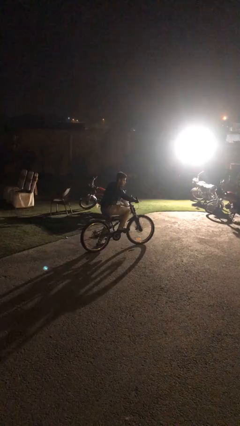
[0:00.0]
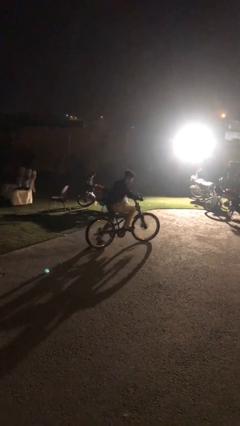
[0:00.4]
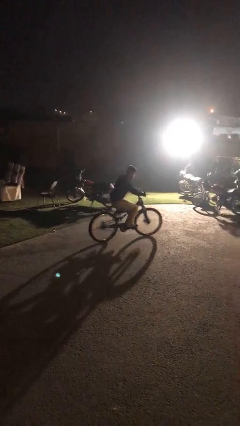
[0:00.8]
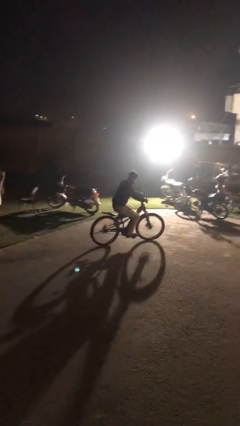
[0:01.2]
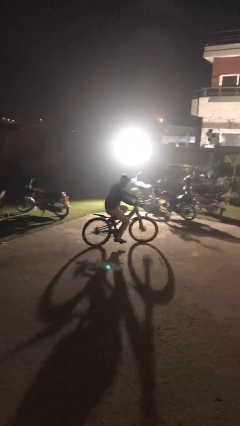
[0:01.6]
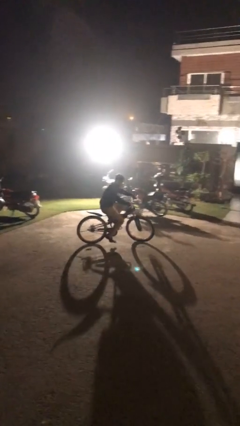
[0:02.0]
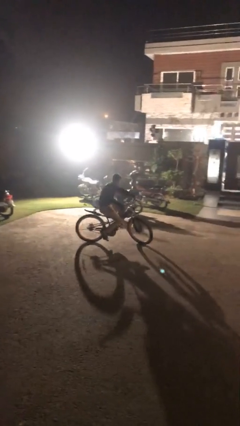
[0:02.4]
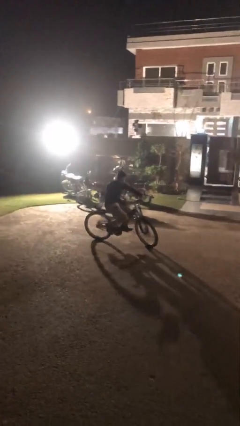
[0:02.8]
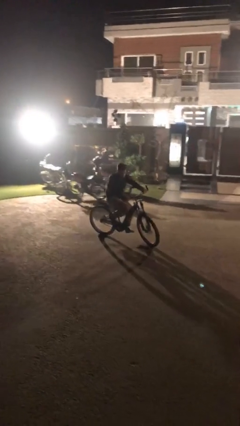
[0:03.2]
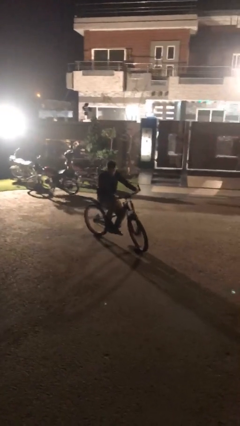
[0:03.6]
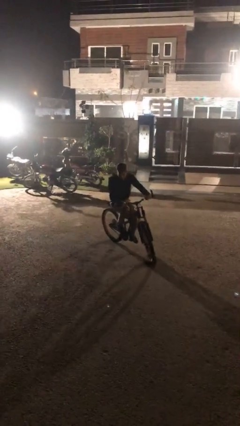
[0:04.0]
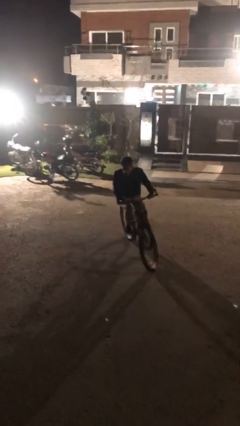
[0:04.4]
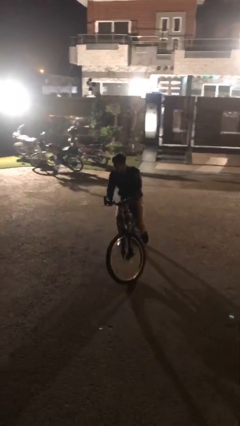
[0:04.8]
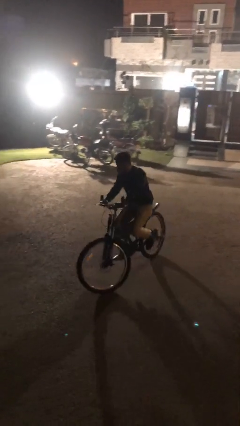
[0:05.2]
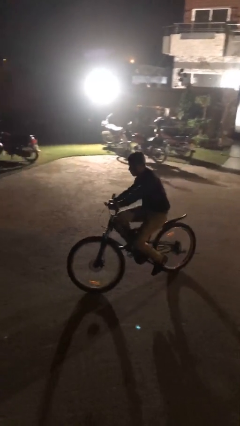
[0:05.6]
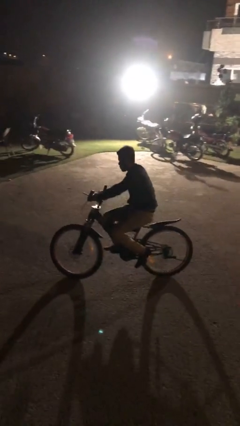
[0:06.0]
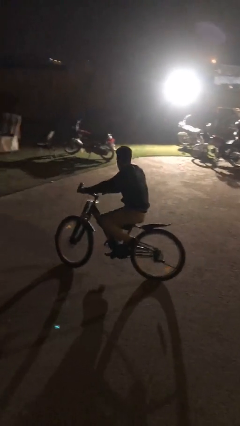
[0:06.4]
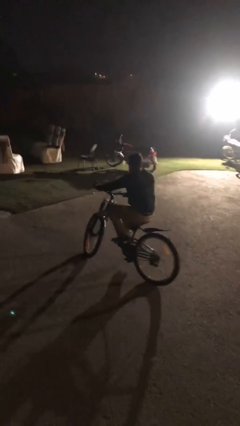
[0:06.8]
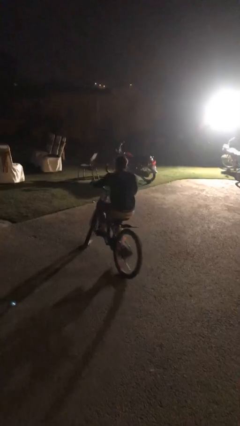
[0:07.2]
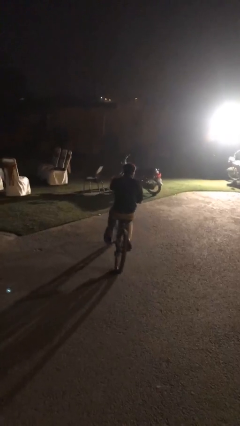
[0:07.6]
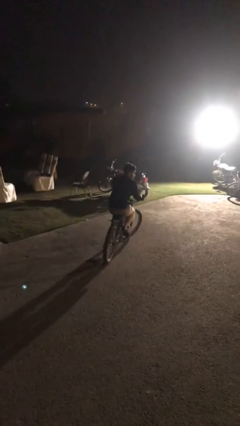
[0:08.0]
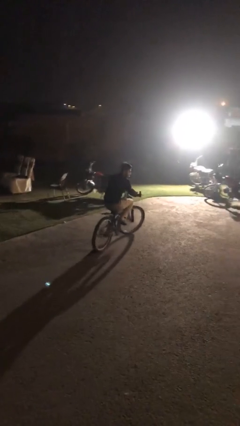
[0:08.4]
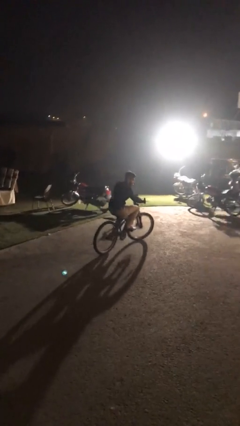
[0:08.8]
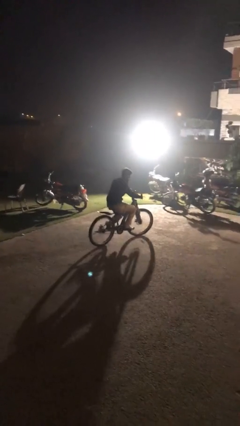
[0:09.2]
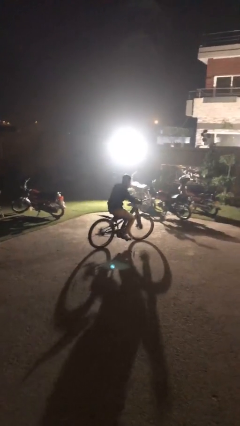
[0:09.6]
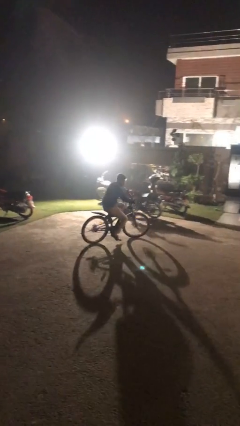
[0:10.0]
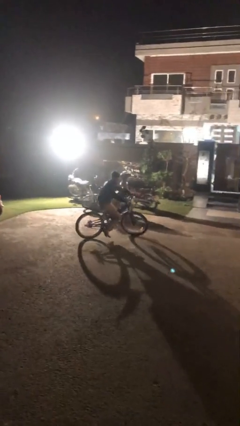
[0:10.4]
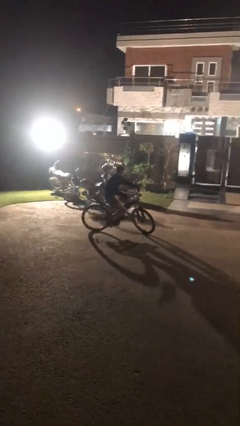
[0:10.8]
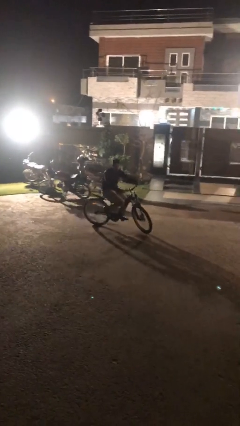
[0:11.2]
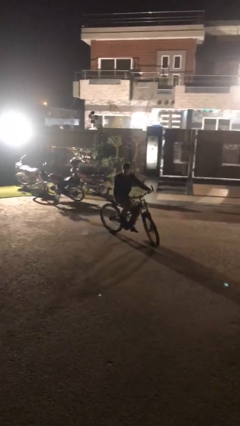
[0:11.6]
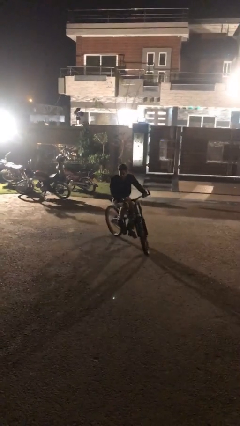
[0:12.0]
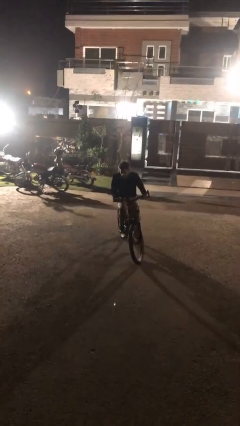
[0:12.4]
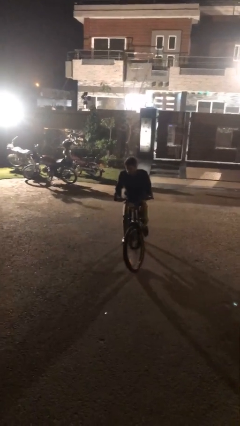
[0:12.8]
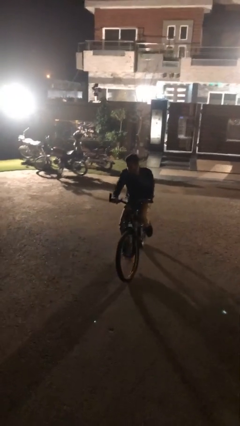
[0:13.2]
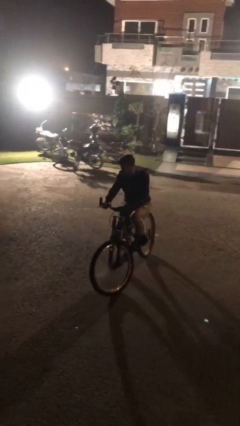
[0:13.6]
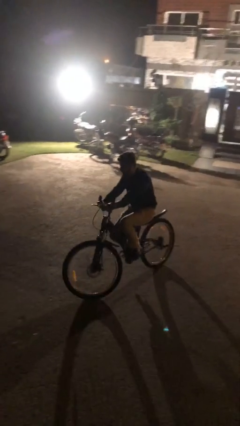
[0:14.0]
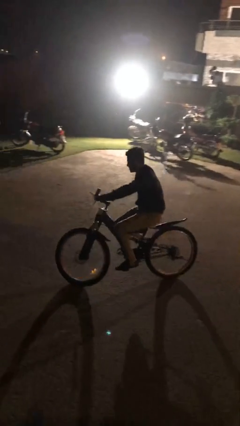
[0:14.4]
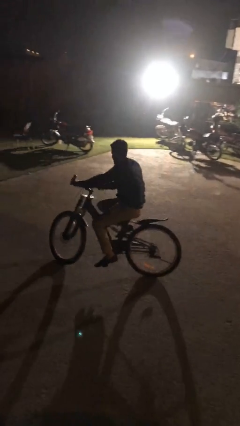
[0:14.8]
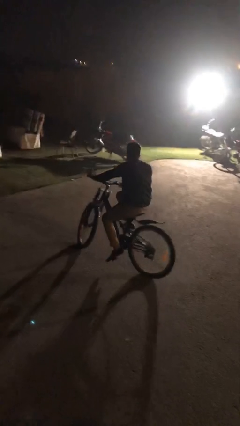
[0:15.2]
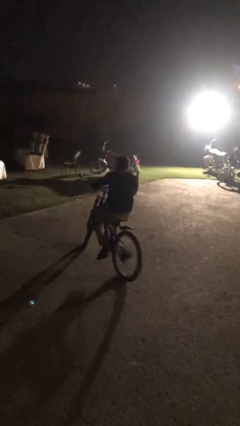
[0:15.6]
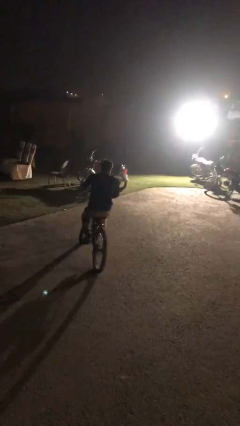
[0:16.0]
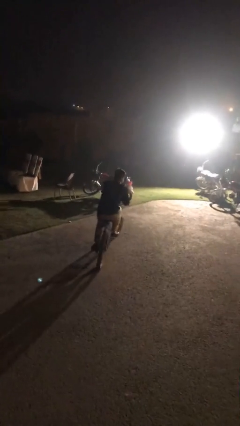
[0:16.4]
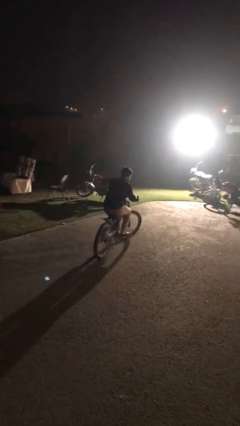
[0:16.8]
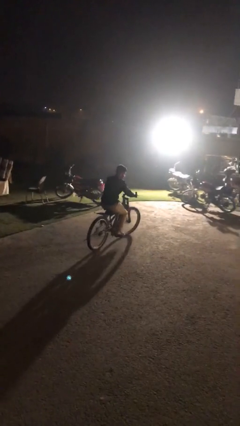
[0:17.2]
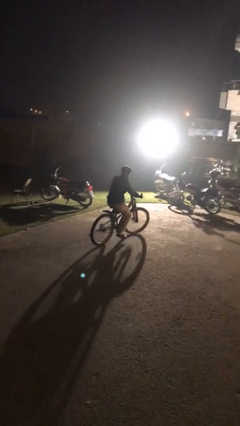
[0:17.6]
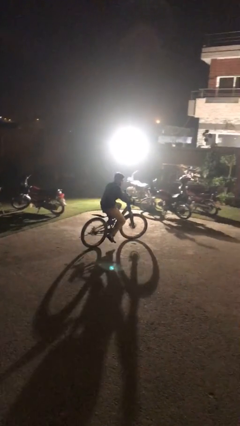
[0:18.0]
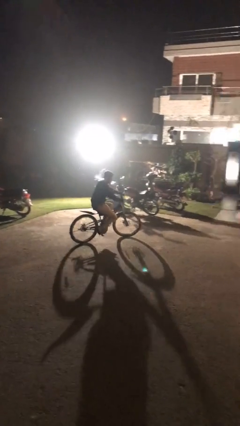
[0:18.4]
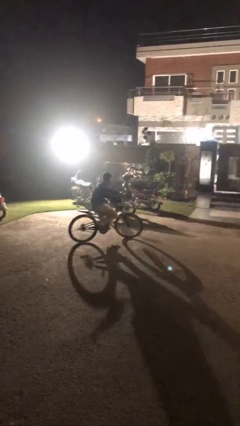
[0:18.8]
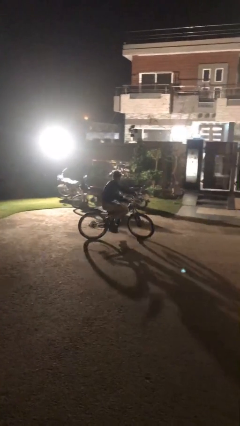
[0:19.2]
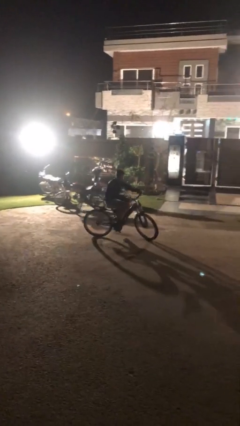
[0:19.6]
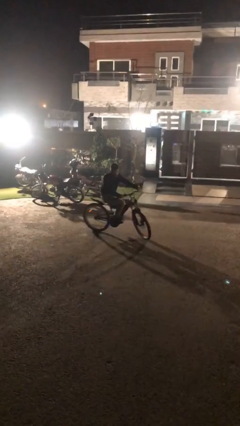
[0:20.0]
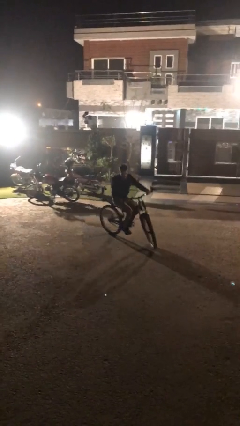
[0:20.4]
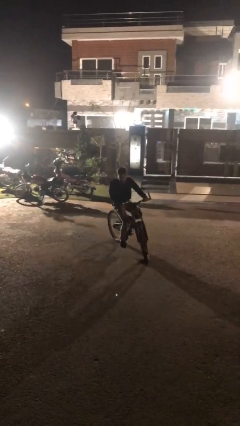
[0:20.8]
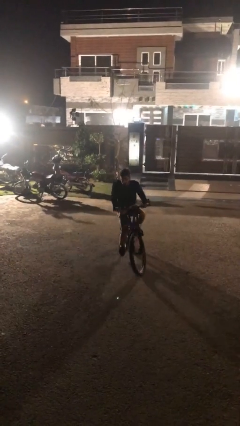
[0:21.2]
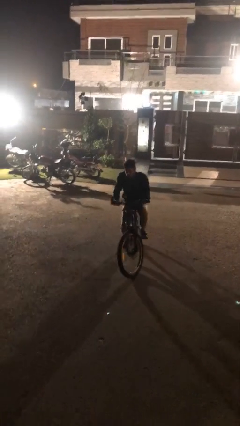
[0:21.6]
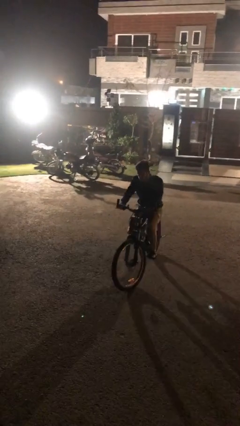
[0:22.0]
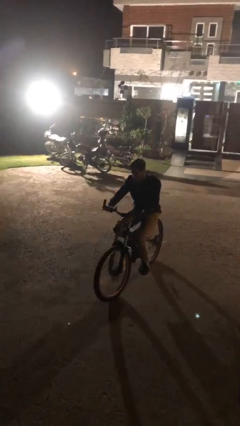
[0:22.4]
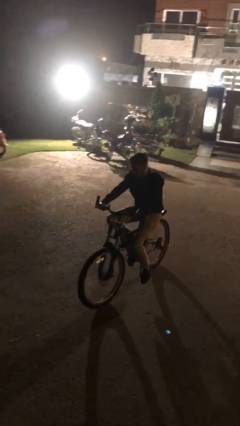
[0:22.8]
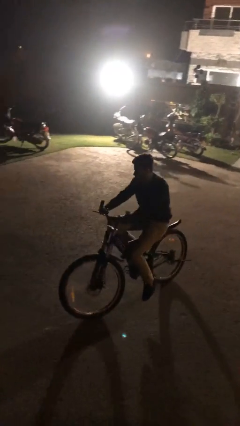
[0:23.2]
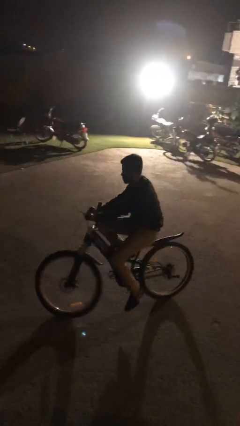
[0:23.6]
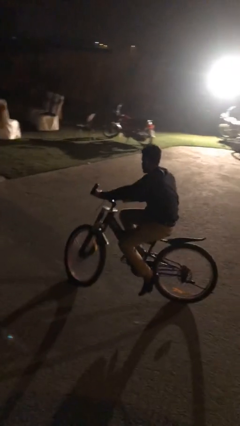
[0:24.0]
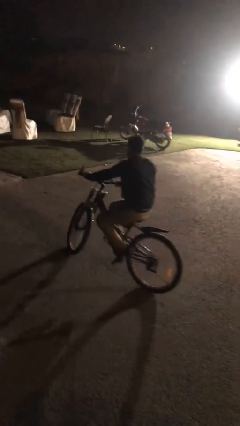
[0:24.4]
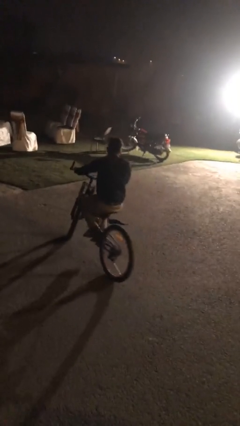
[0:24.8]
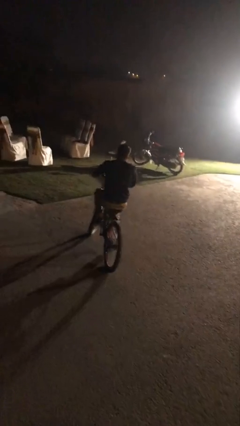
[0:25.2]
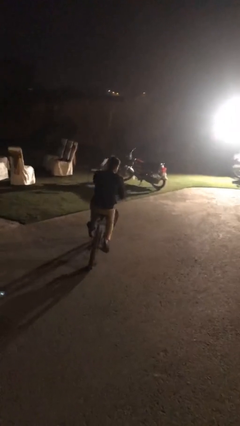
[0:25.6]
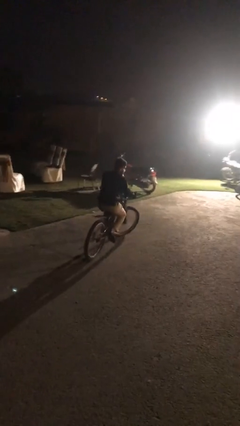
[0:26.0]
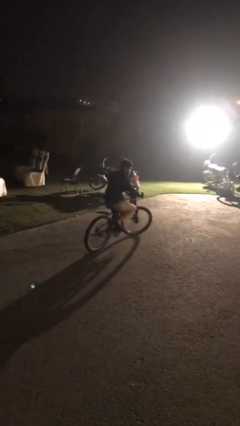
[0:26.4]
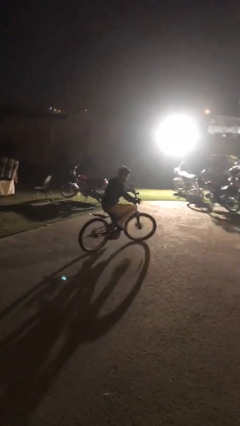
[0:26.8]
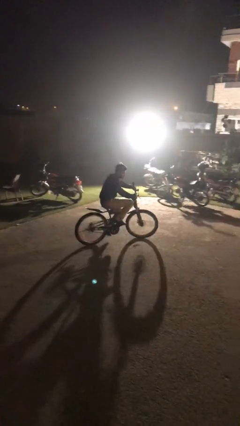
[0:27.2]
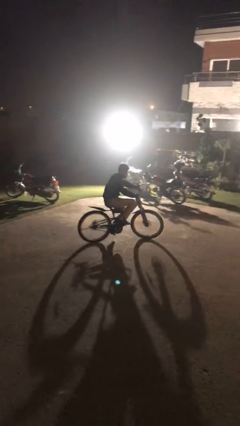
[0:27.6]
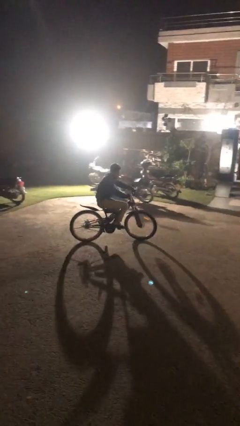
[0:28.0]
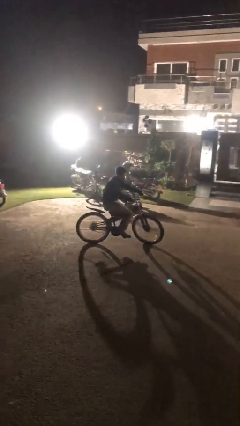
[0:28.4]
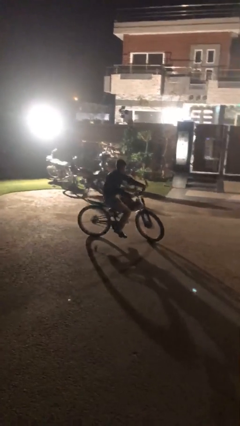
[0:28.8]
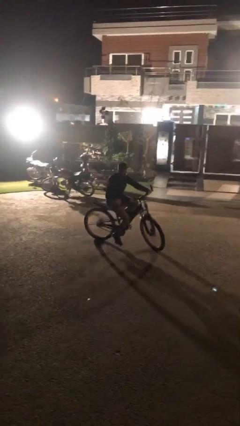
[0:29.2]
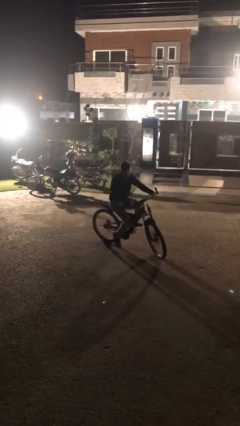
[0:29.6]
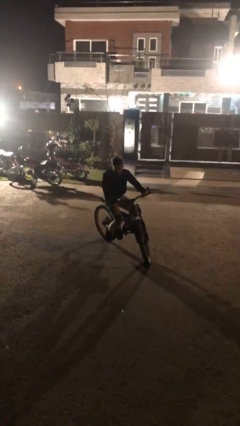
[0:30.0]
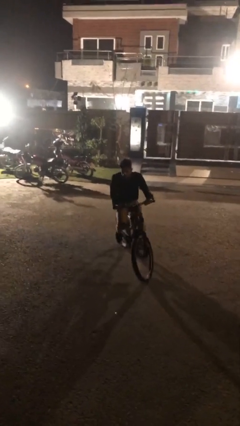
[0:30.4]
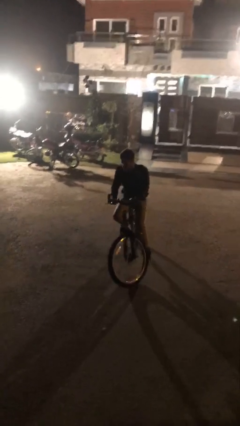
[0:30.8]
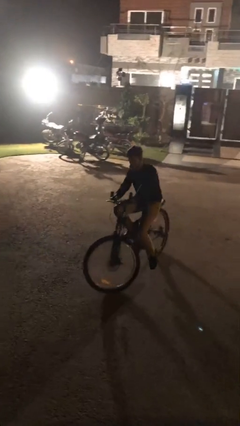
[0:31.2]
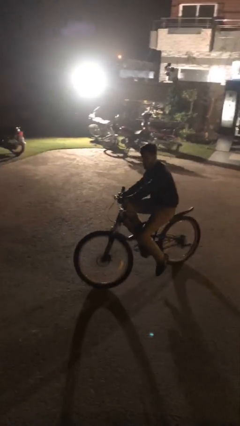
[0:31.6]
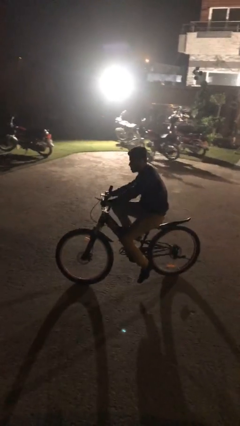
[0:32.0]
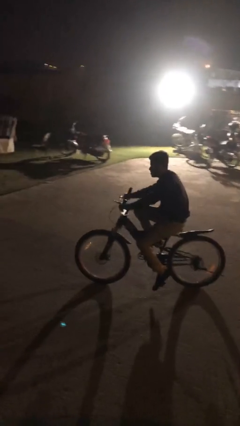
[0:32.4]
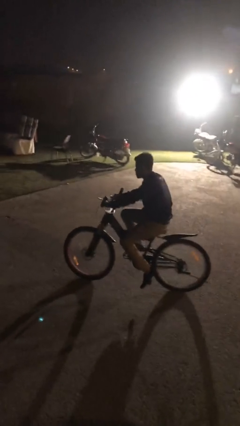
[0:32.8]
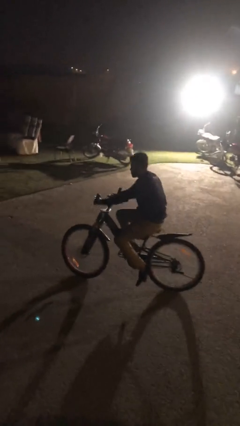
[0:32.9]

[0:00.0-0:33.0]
person rides bicycle

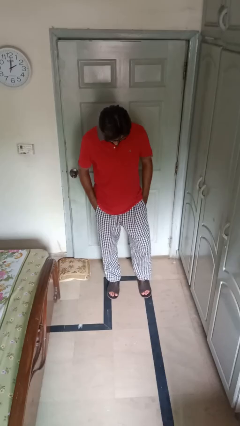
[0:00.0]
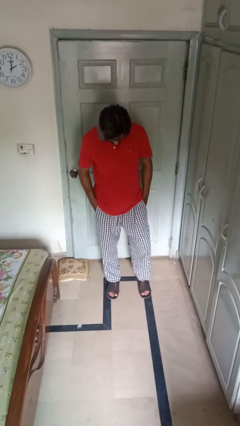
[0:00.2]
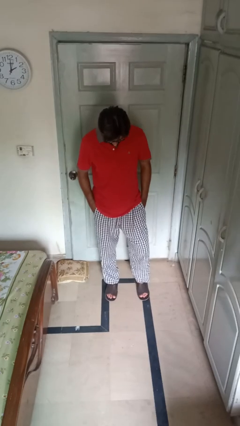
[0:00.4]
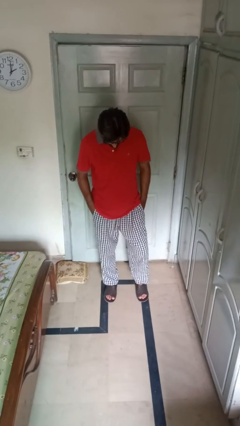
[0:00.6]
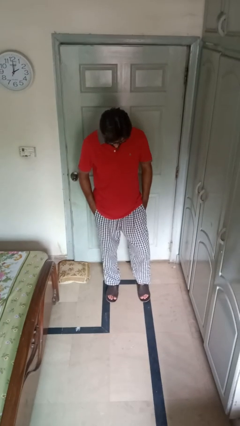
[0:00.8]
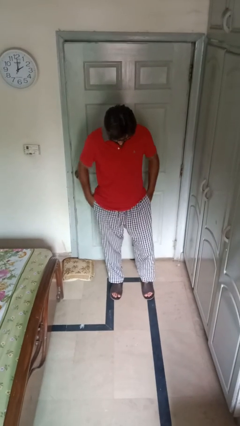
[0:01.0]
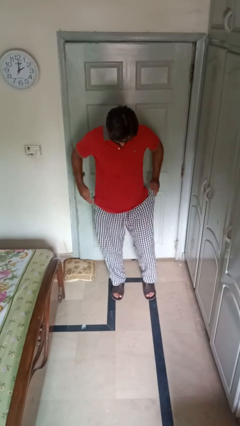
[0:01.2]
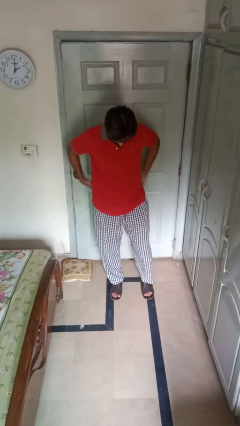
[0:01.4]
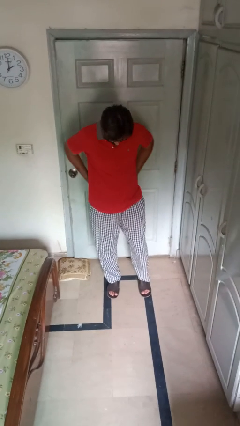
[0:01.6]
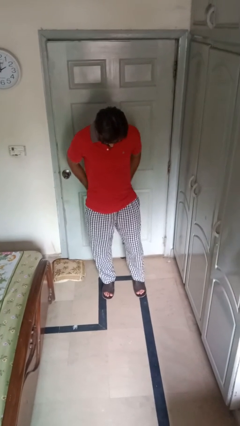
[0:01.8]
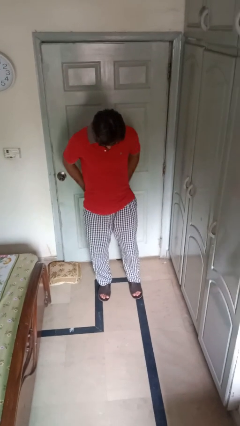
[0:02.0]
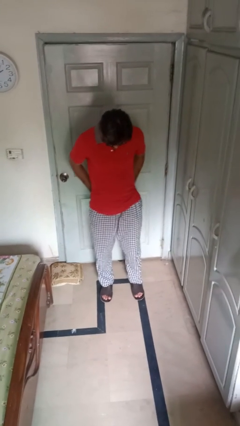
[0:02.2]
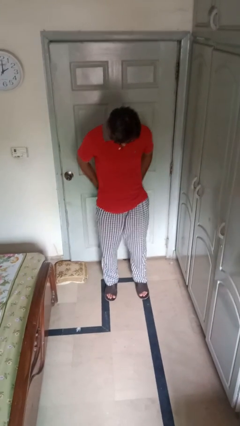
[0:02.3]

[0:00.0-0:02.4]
person puts hands in back pockets
